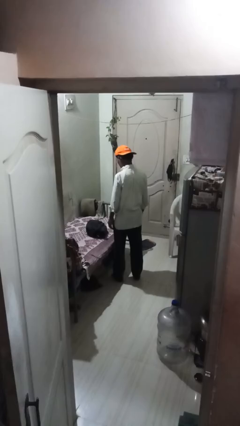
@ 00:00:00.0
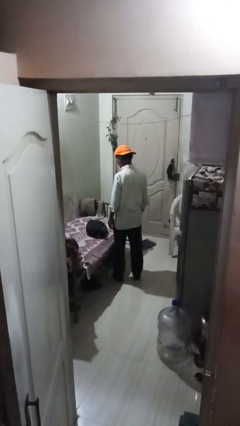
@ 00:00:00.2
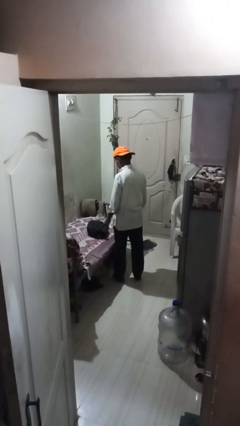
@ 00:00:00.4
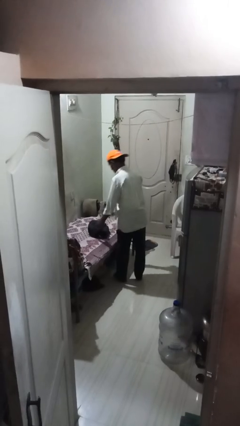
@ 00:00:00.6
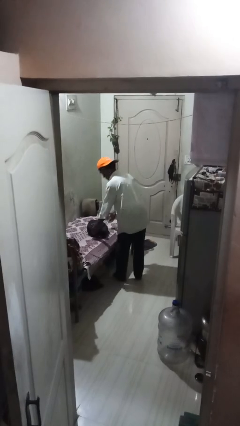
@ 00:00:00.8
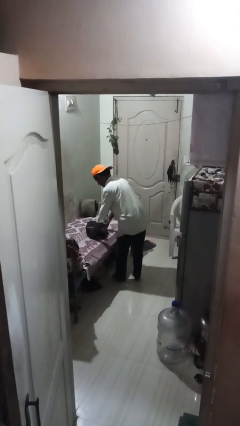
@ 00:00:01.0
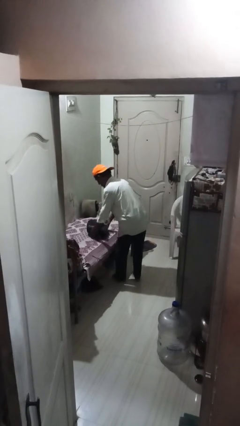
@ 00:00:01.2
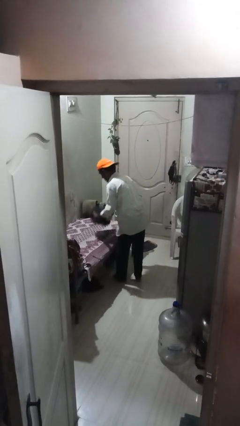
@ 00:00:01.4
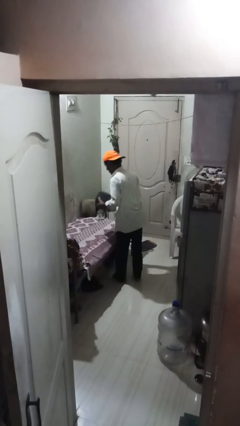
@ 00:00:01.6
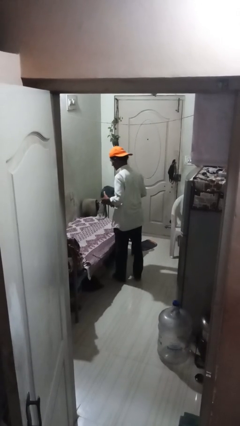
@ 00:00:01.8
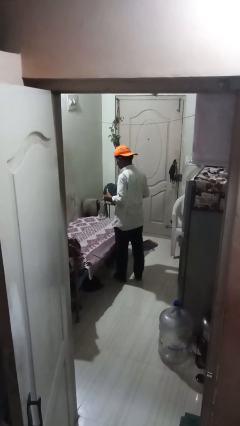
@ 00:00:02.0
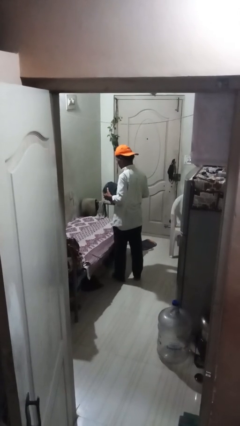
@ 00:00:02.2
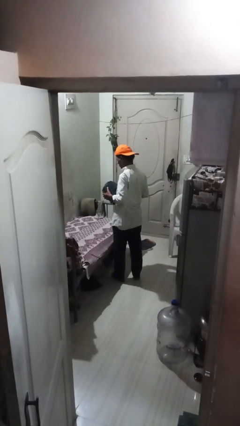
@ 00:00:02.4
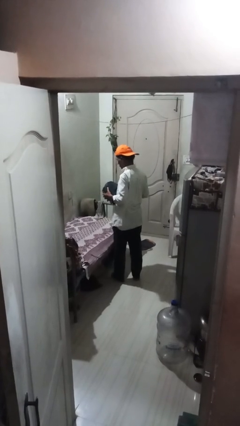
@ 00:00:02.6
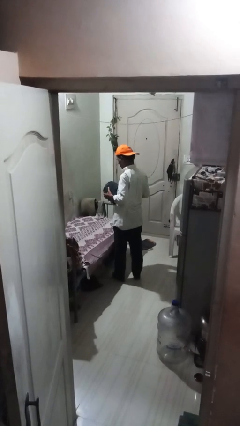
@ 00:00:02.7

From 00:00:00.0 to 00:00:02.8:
person picks up object from bed

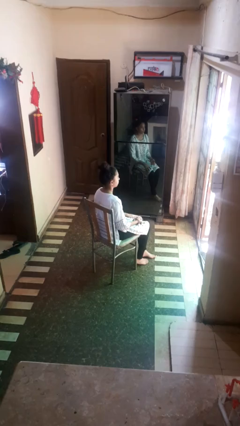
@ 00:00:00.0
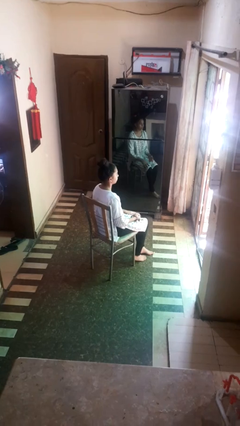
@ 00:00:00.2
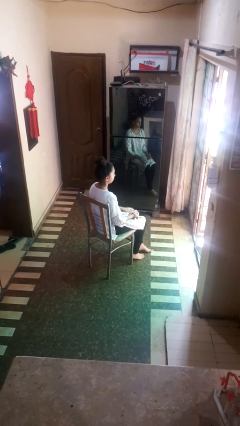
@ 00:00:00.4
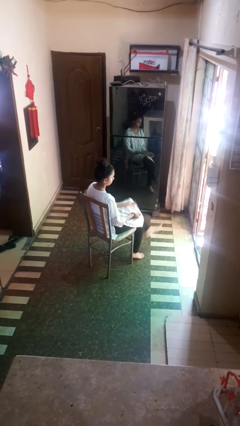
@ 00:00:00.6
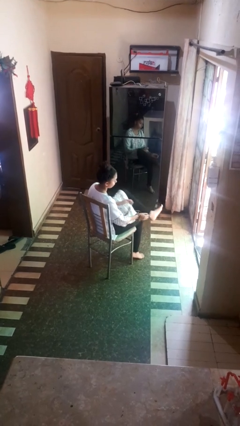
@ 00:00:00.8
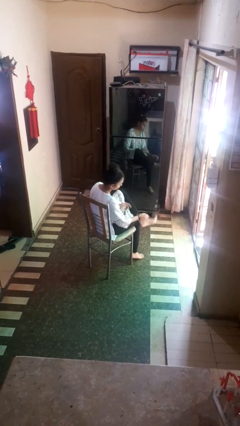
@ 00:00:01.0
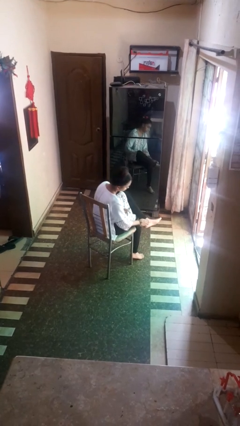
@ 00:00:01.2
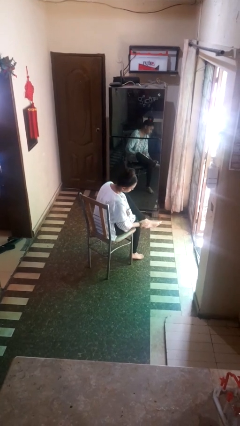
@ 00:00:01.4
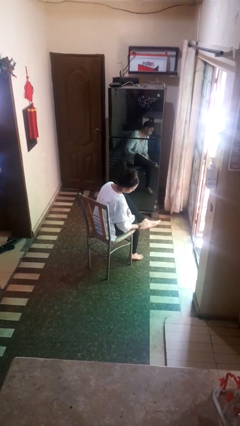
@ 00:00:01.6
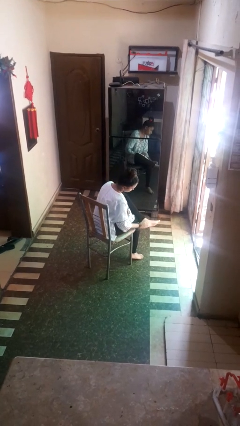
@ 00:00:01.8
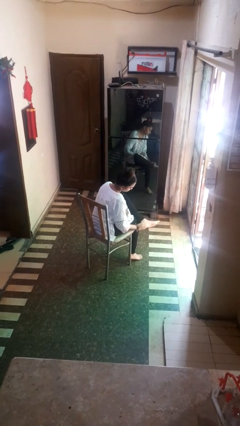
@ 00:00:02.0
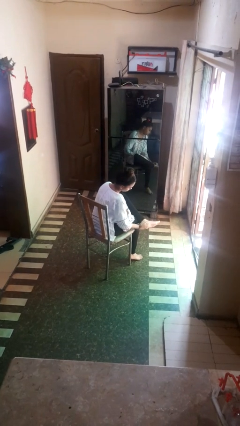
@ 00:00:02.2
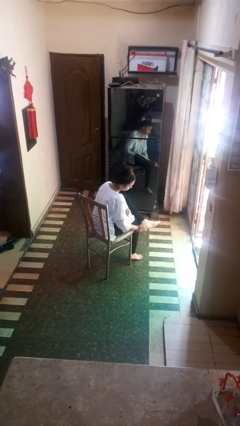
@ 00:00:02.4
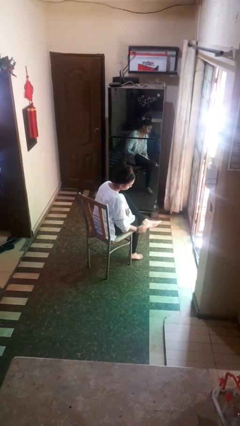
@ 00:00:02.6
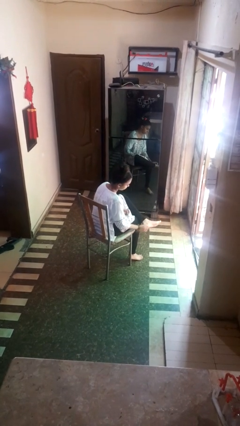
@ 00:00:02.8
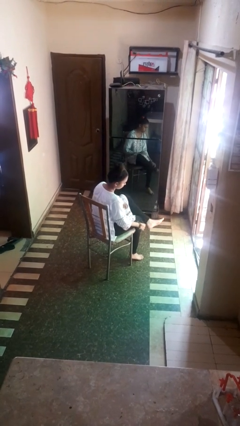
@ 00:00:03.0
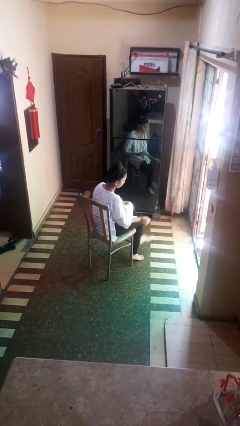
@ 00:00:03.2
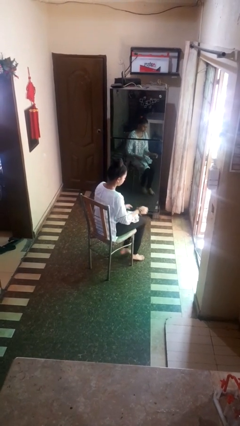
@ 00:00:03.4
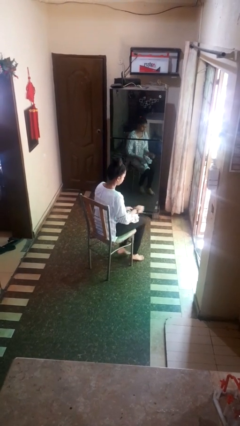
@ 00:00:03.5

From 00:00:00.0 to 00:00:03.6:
person rubs foot

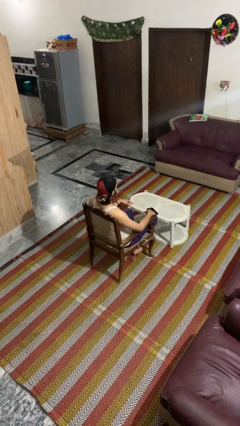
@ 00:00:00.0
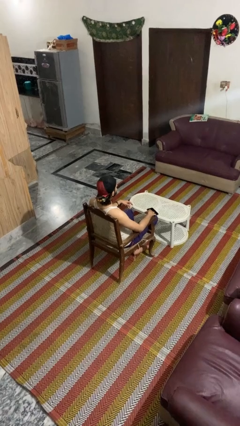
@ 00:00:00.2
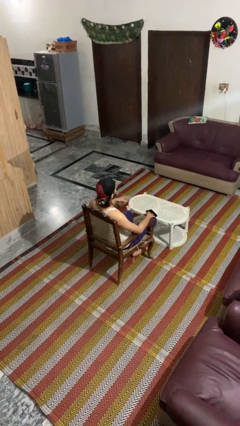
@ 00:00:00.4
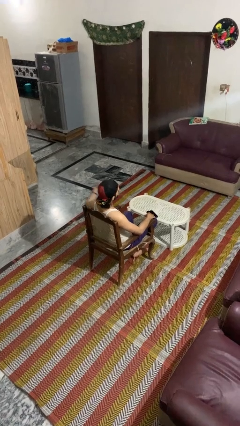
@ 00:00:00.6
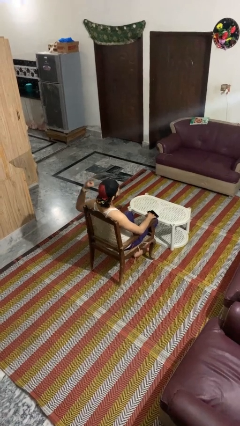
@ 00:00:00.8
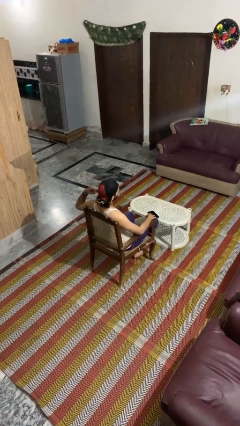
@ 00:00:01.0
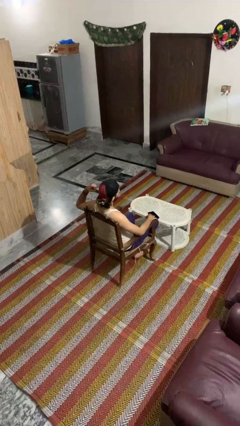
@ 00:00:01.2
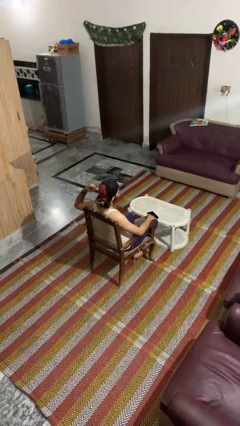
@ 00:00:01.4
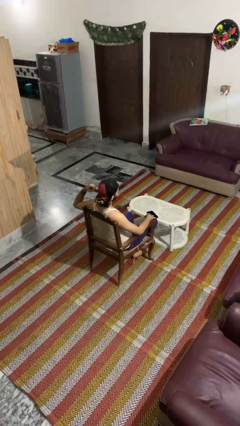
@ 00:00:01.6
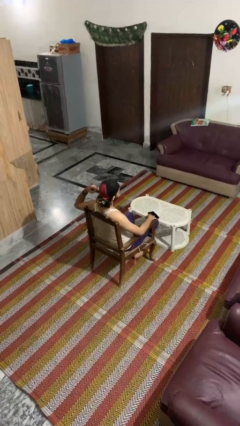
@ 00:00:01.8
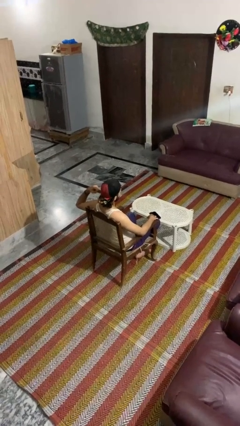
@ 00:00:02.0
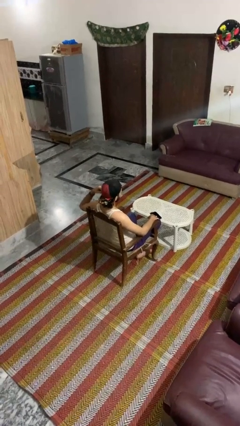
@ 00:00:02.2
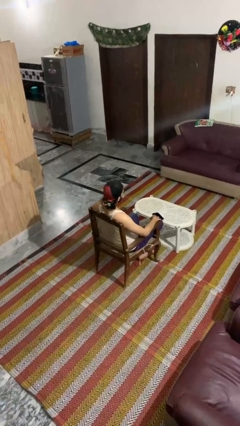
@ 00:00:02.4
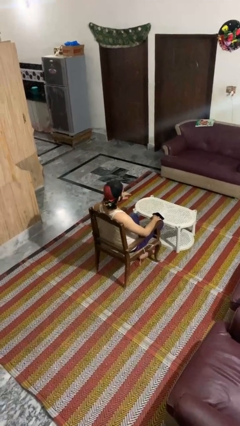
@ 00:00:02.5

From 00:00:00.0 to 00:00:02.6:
person gestures listen closely

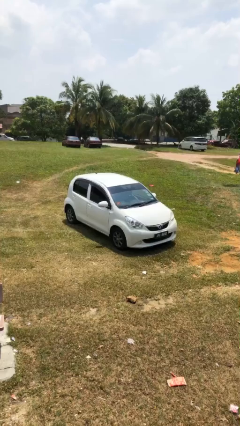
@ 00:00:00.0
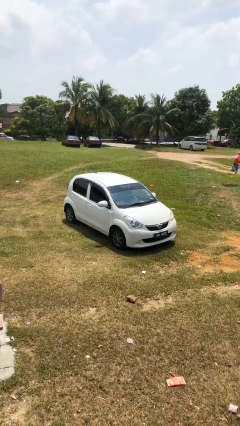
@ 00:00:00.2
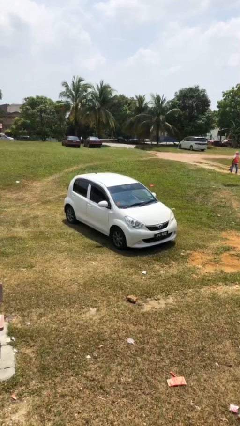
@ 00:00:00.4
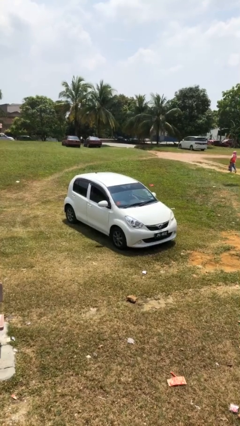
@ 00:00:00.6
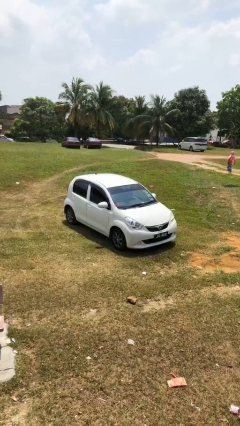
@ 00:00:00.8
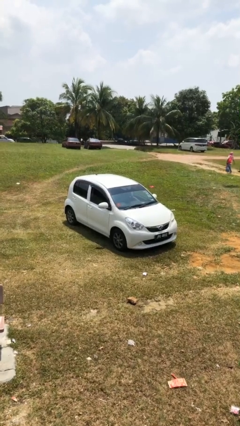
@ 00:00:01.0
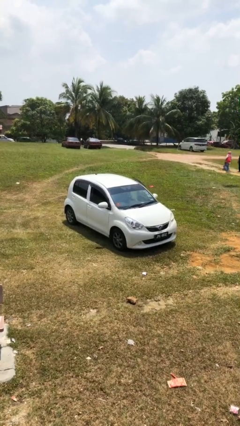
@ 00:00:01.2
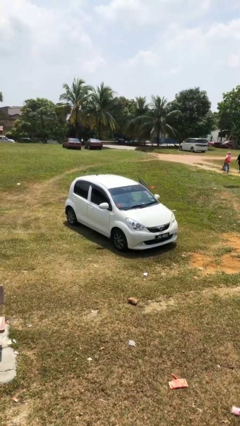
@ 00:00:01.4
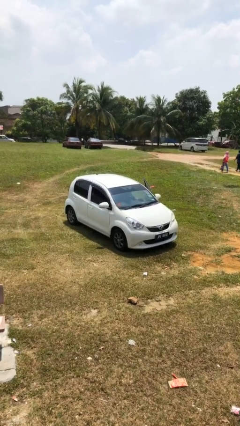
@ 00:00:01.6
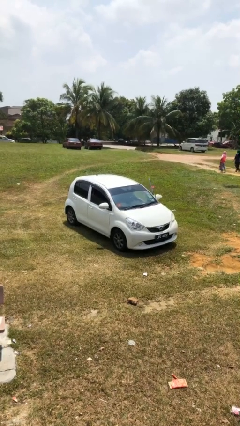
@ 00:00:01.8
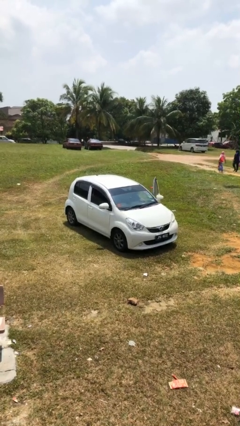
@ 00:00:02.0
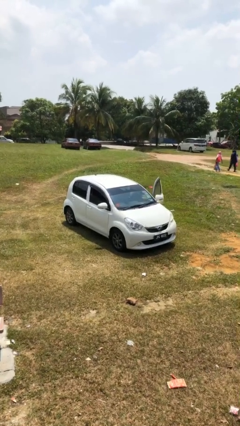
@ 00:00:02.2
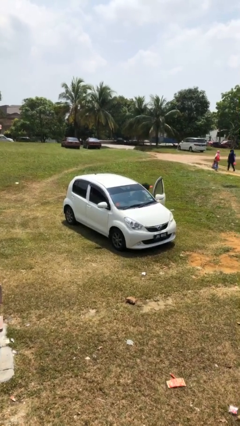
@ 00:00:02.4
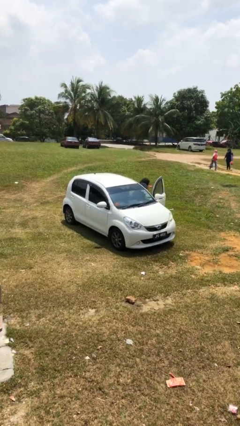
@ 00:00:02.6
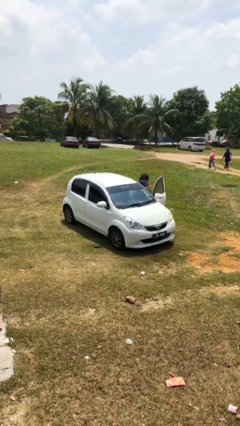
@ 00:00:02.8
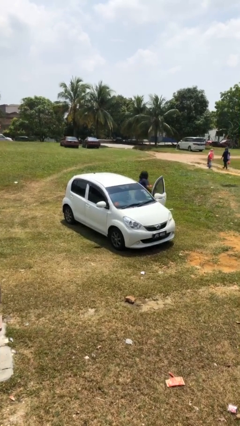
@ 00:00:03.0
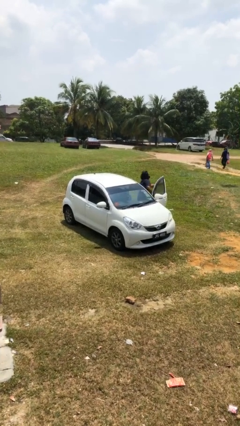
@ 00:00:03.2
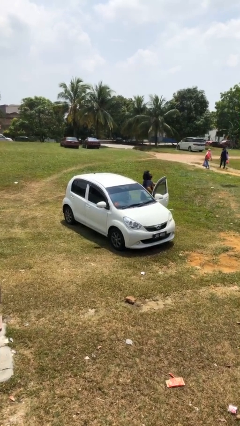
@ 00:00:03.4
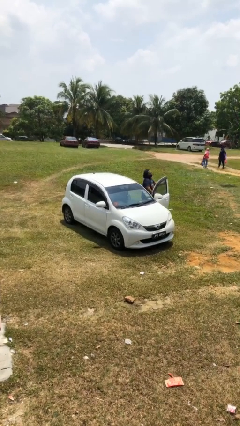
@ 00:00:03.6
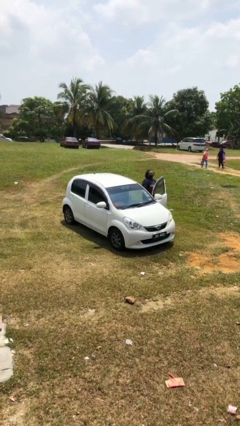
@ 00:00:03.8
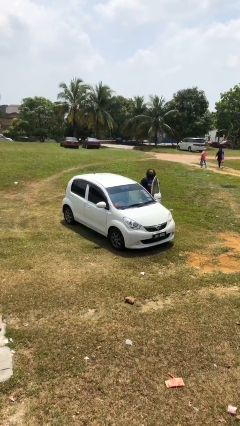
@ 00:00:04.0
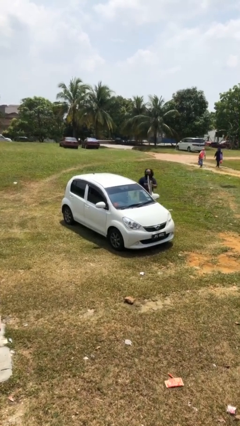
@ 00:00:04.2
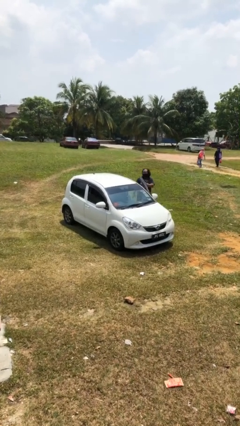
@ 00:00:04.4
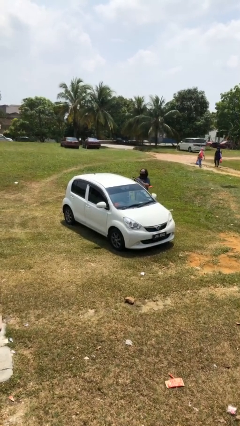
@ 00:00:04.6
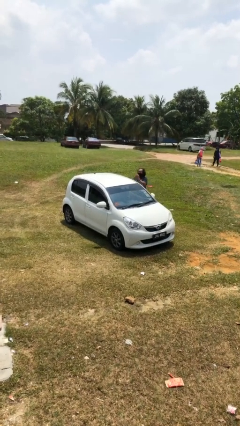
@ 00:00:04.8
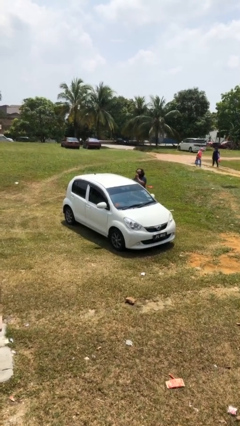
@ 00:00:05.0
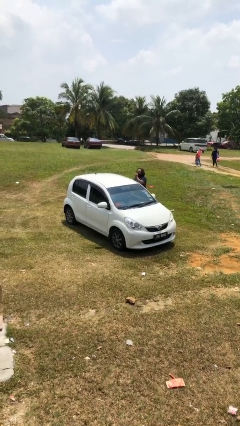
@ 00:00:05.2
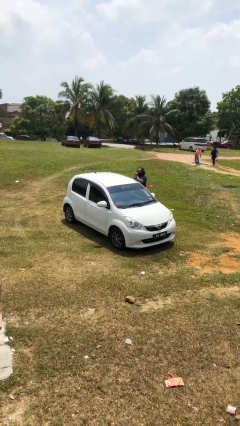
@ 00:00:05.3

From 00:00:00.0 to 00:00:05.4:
car drops off person

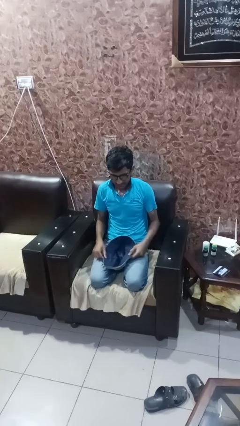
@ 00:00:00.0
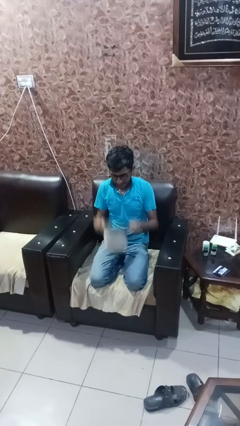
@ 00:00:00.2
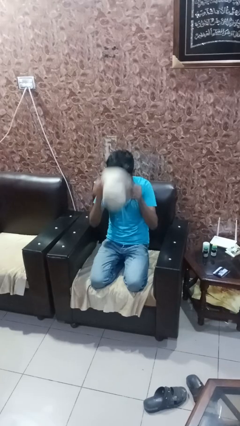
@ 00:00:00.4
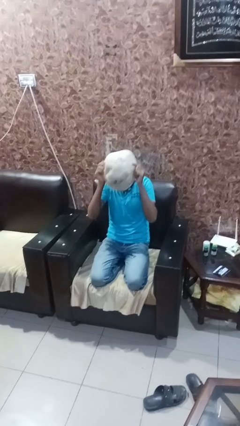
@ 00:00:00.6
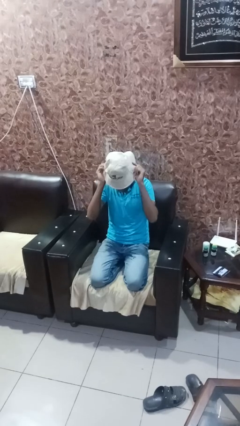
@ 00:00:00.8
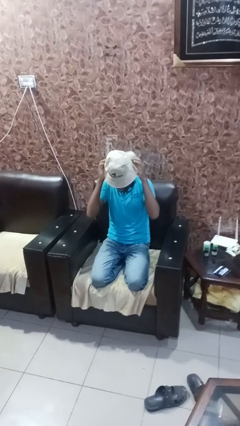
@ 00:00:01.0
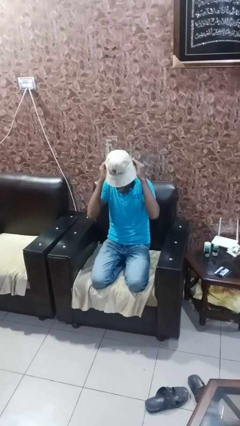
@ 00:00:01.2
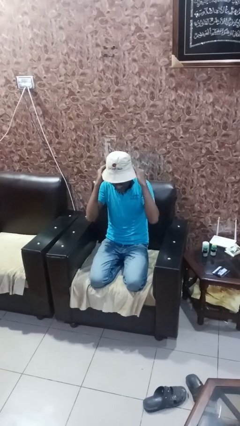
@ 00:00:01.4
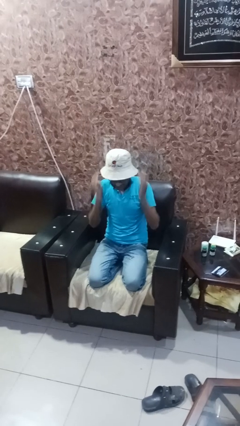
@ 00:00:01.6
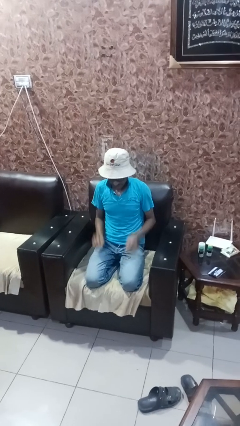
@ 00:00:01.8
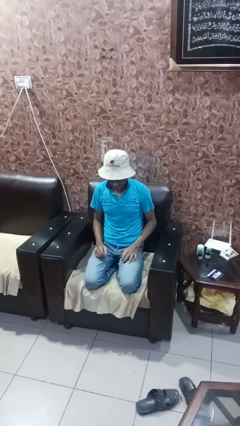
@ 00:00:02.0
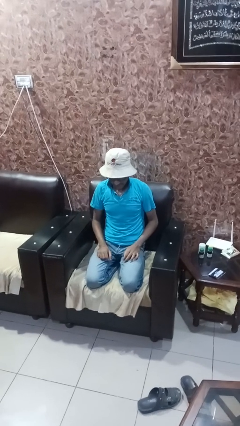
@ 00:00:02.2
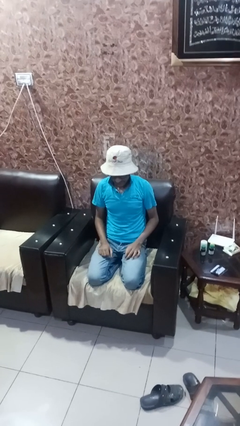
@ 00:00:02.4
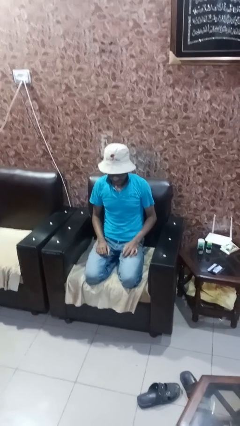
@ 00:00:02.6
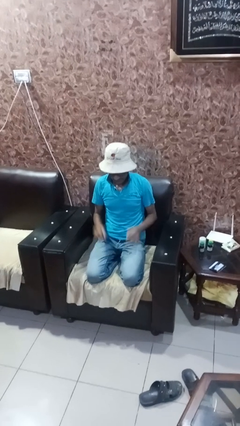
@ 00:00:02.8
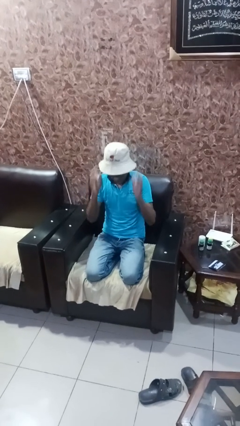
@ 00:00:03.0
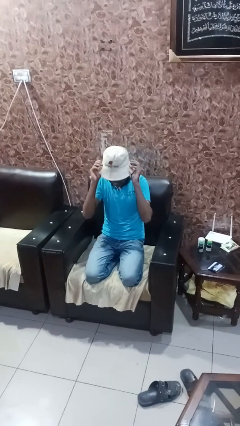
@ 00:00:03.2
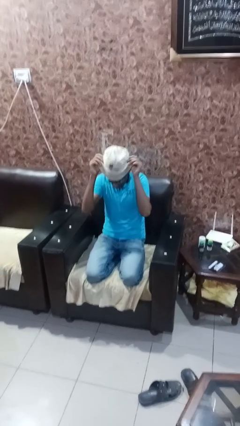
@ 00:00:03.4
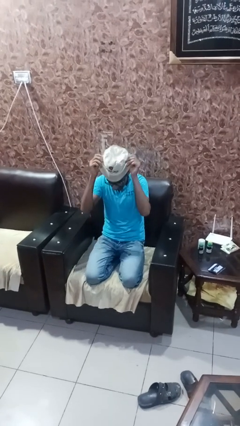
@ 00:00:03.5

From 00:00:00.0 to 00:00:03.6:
person puts on hat
